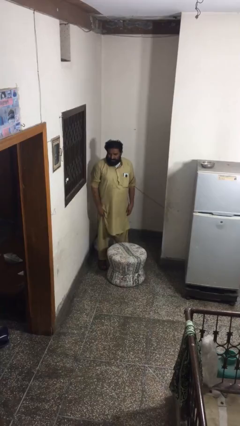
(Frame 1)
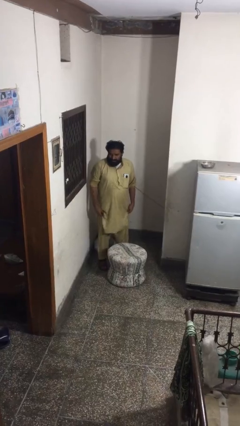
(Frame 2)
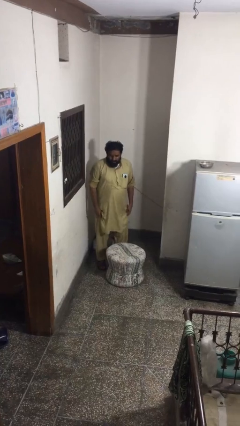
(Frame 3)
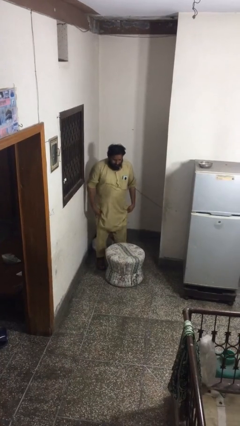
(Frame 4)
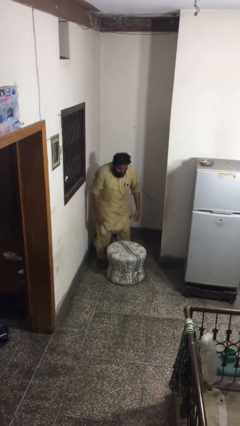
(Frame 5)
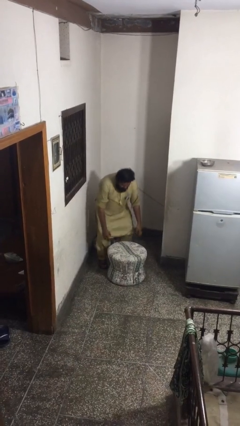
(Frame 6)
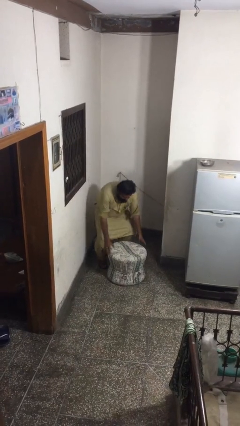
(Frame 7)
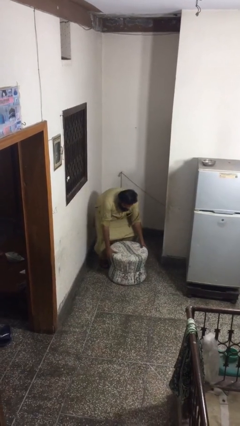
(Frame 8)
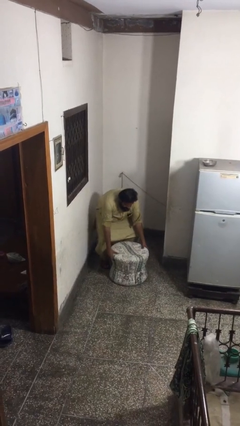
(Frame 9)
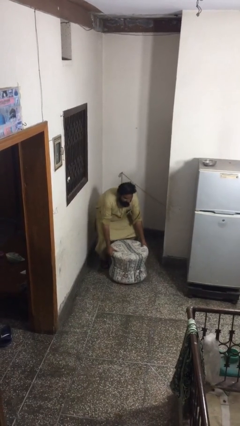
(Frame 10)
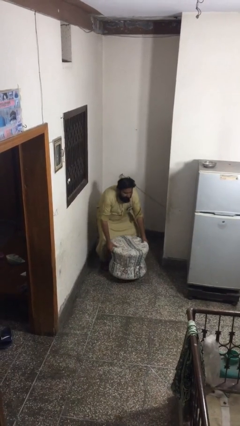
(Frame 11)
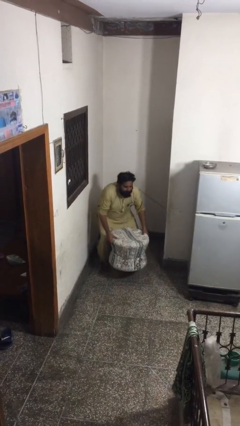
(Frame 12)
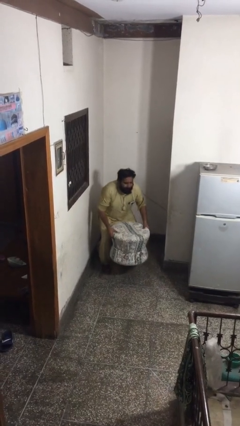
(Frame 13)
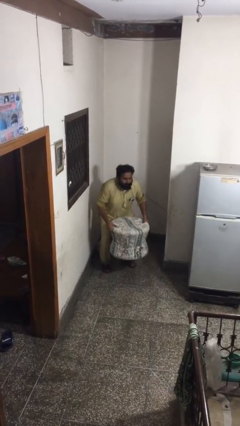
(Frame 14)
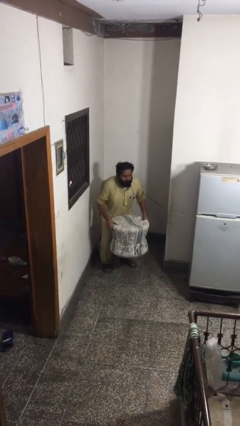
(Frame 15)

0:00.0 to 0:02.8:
person picks up object from floor

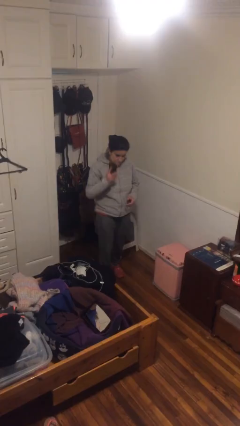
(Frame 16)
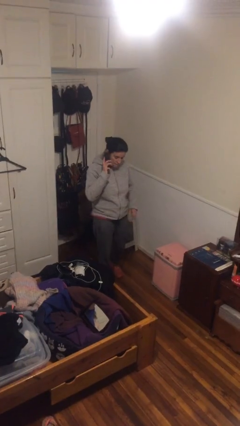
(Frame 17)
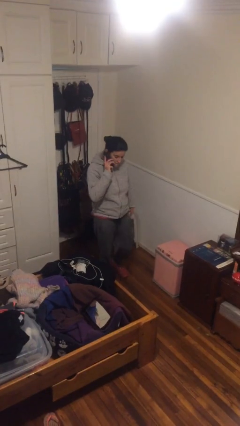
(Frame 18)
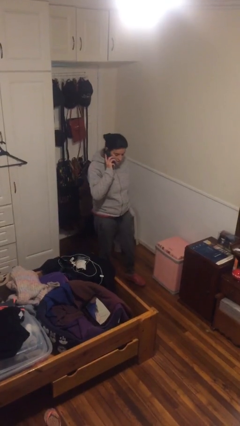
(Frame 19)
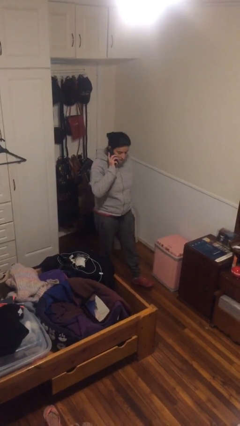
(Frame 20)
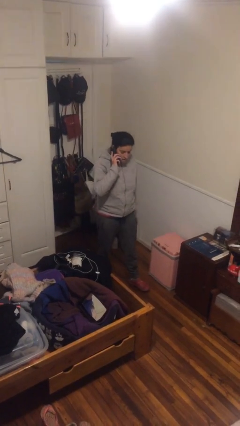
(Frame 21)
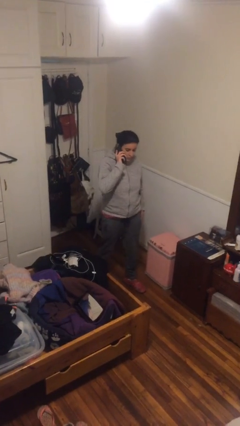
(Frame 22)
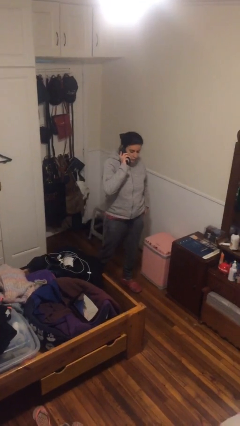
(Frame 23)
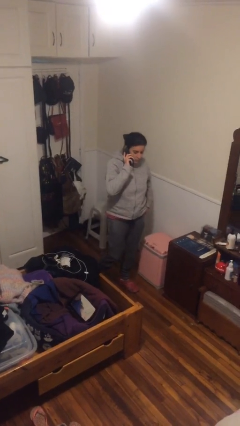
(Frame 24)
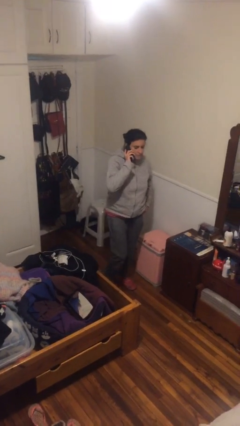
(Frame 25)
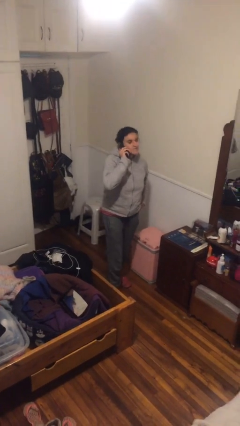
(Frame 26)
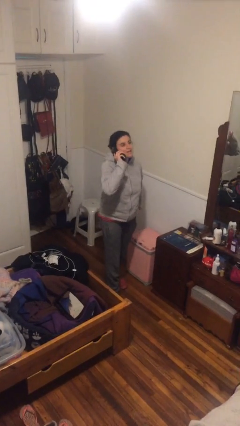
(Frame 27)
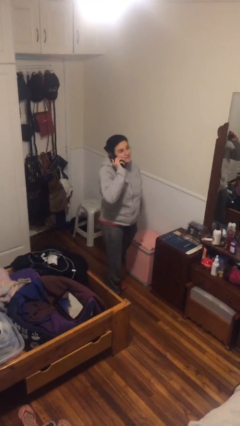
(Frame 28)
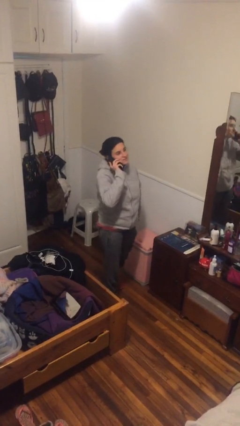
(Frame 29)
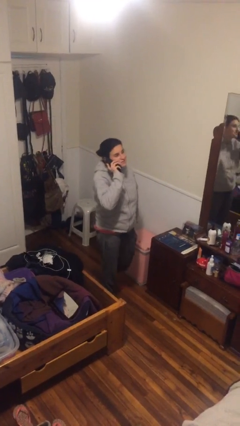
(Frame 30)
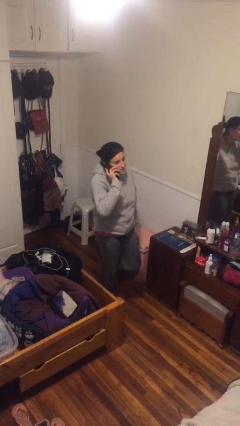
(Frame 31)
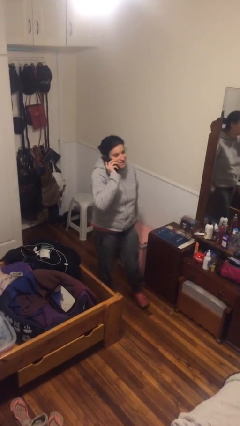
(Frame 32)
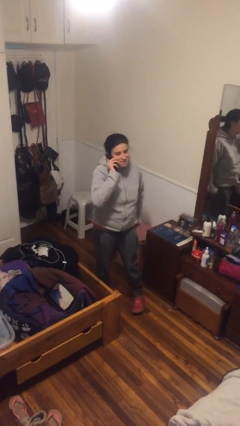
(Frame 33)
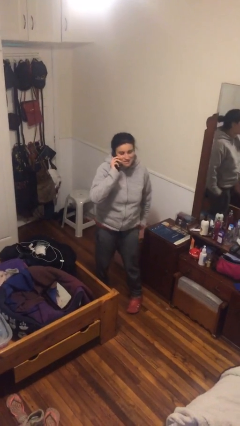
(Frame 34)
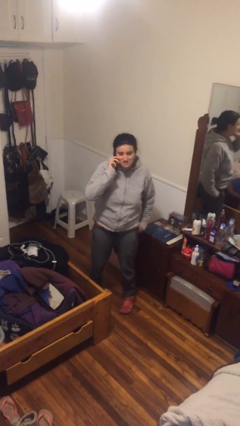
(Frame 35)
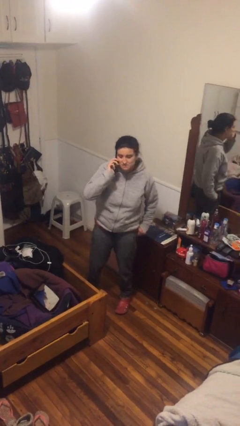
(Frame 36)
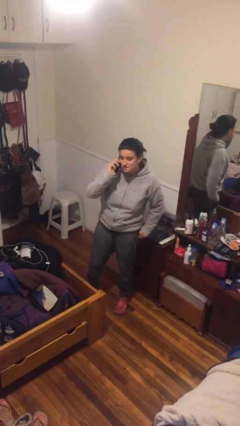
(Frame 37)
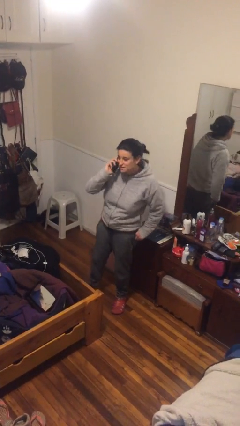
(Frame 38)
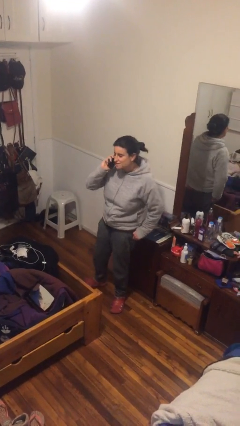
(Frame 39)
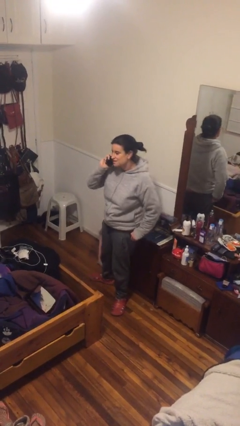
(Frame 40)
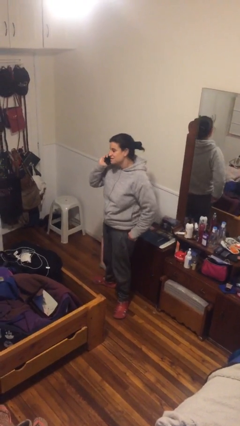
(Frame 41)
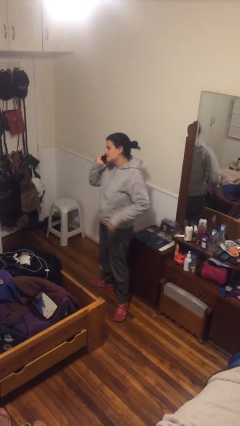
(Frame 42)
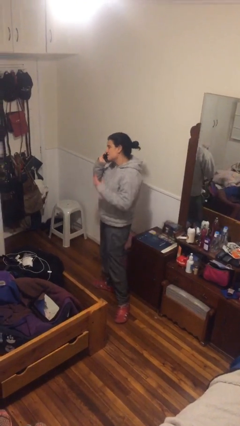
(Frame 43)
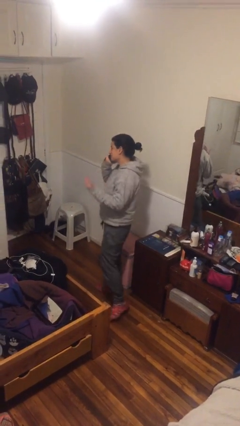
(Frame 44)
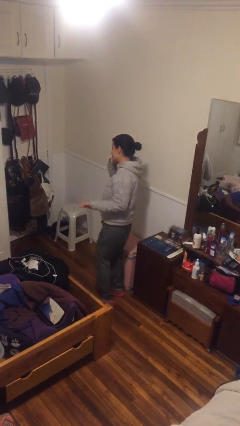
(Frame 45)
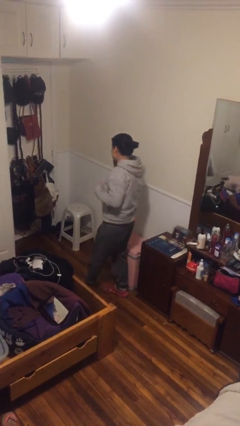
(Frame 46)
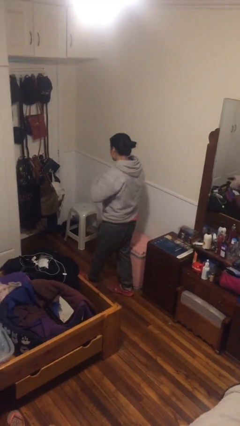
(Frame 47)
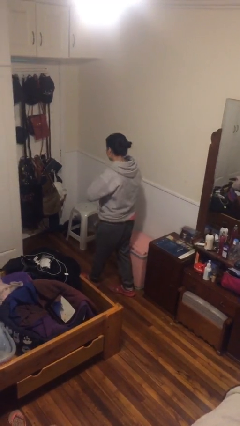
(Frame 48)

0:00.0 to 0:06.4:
person talks on phone

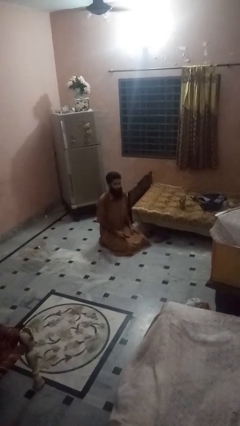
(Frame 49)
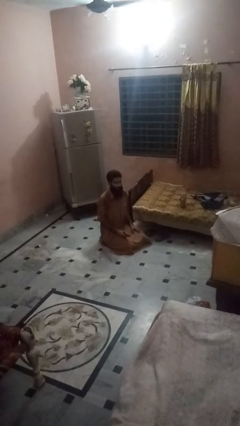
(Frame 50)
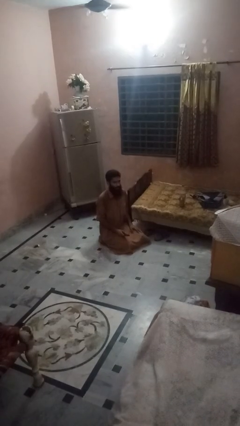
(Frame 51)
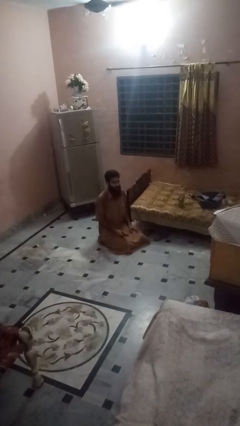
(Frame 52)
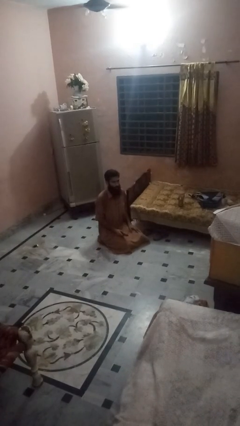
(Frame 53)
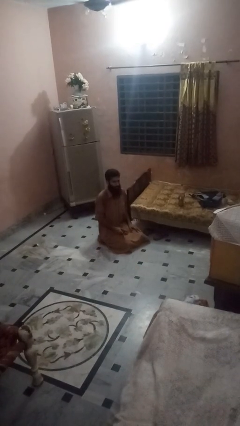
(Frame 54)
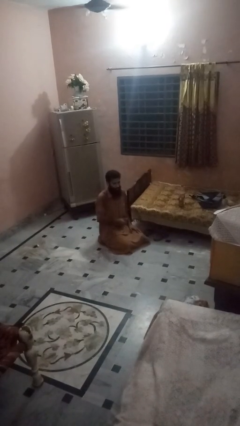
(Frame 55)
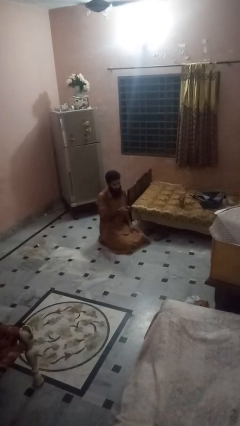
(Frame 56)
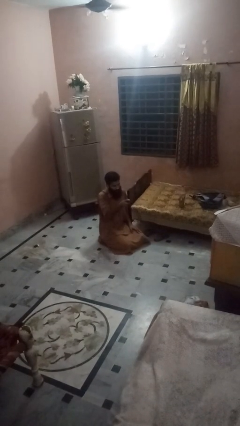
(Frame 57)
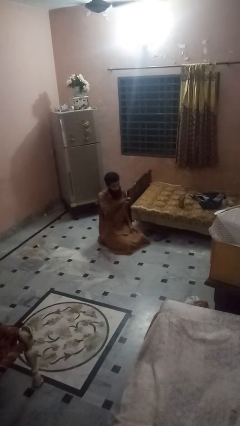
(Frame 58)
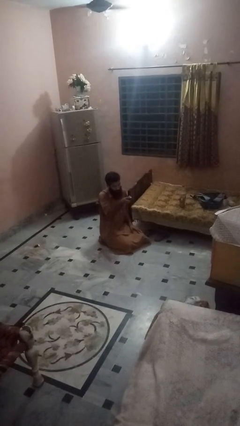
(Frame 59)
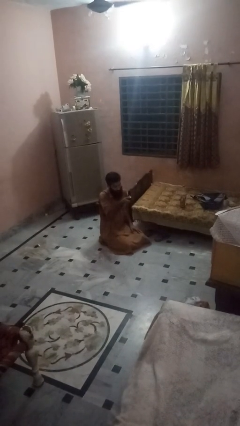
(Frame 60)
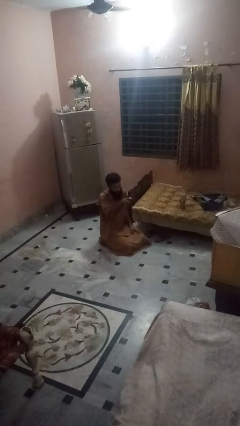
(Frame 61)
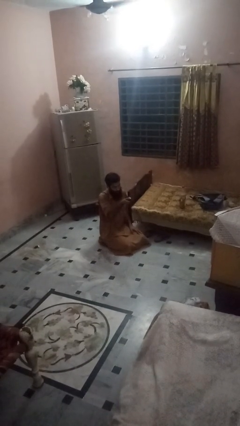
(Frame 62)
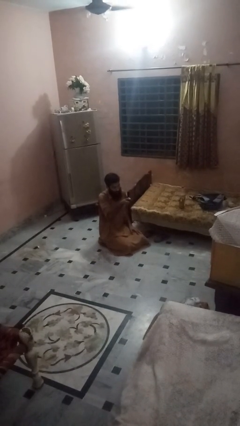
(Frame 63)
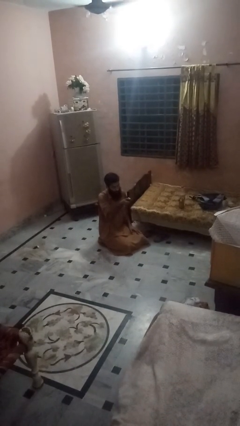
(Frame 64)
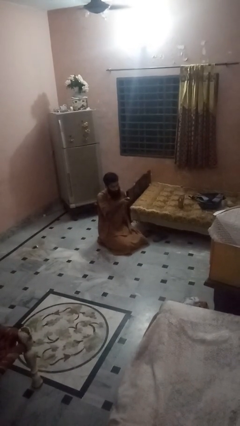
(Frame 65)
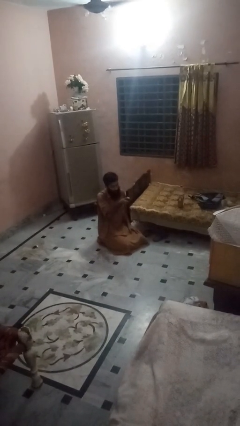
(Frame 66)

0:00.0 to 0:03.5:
person uses television remote

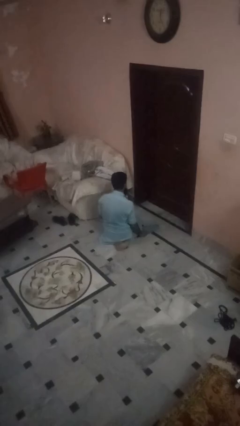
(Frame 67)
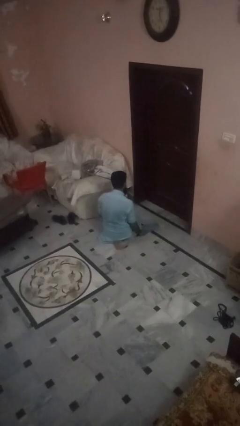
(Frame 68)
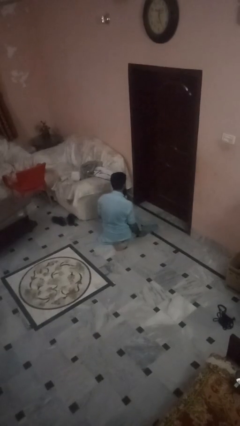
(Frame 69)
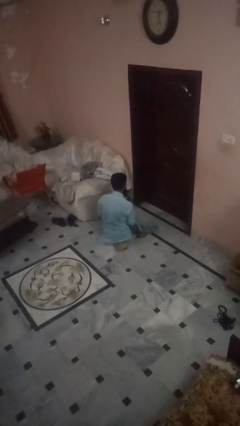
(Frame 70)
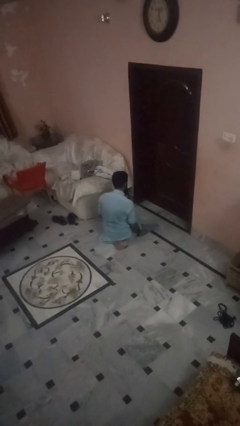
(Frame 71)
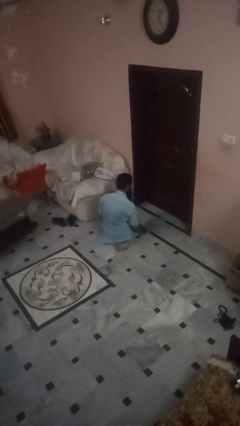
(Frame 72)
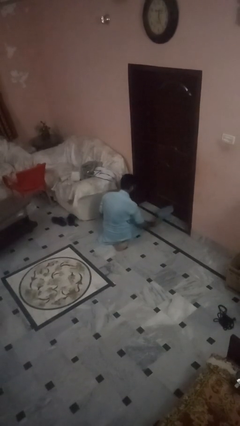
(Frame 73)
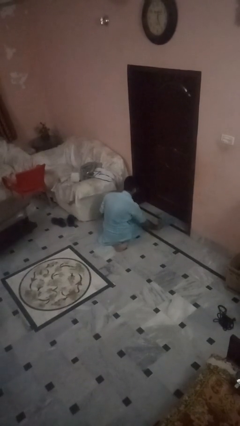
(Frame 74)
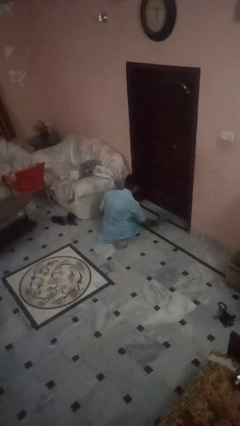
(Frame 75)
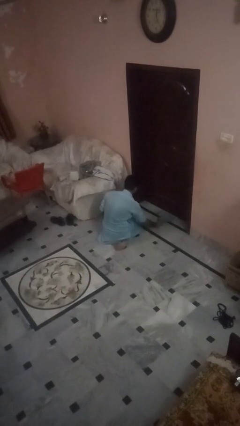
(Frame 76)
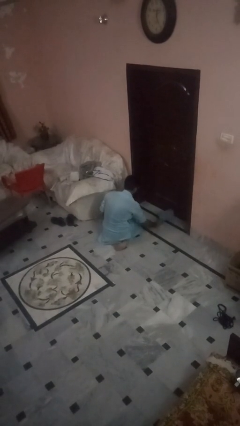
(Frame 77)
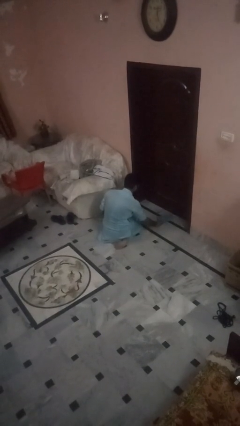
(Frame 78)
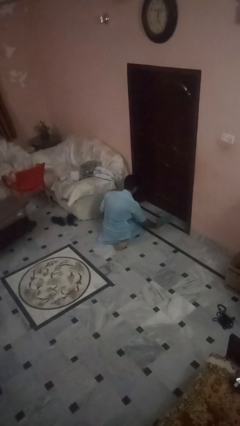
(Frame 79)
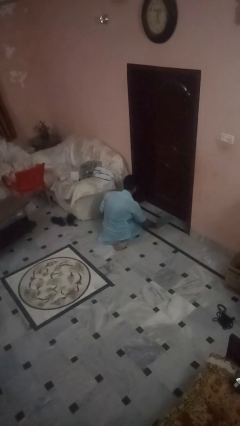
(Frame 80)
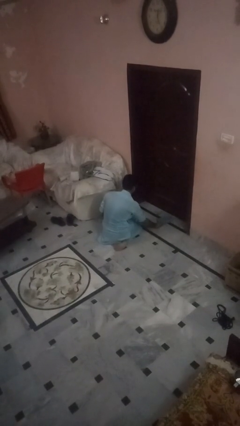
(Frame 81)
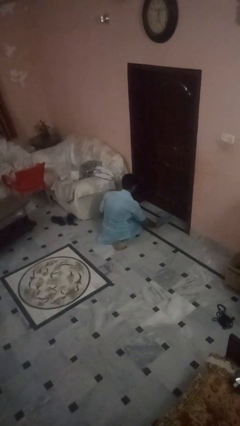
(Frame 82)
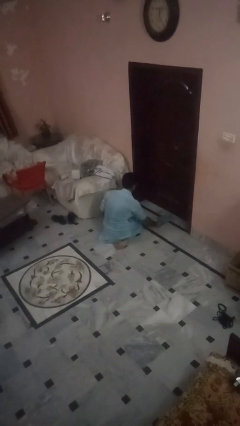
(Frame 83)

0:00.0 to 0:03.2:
person swats bug

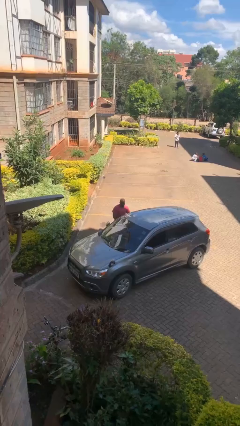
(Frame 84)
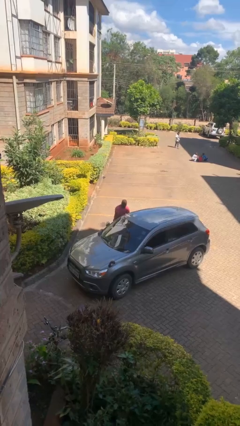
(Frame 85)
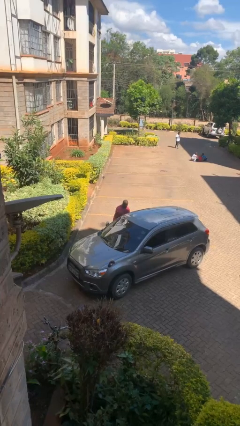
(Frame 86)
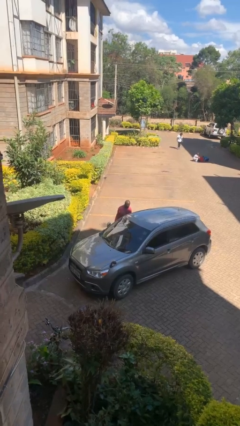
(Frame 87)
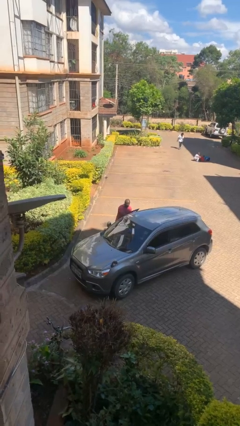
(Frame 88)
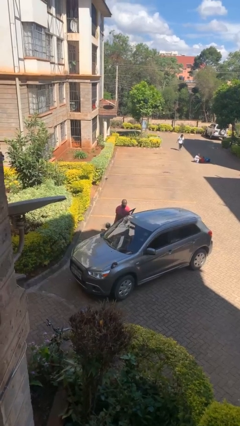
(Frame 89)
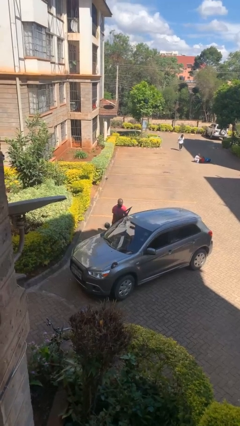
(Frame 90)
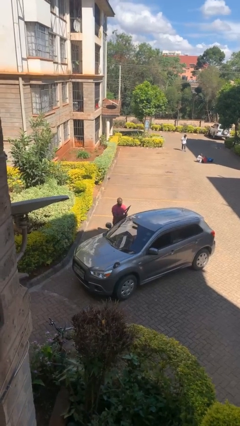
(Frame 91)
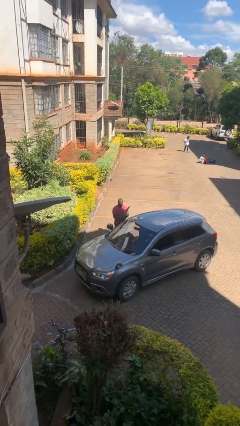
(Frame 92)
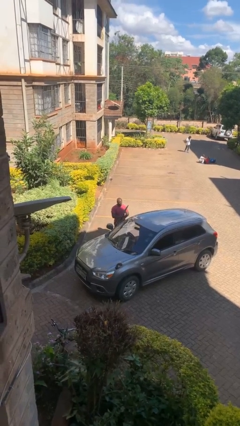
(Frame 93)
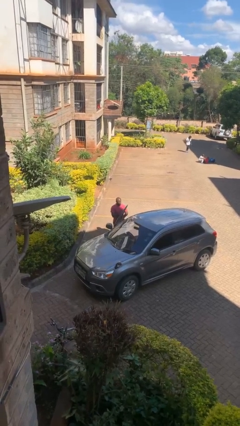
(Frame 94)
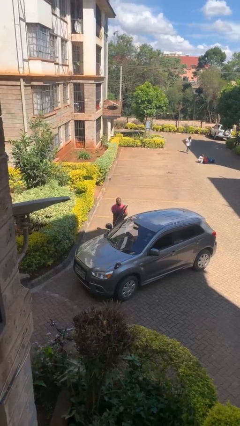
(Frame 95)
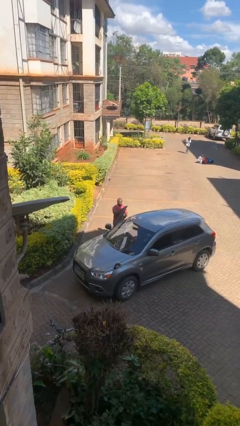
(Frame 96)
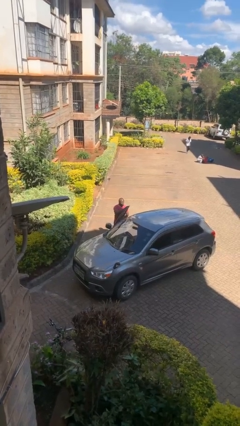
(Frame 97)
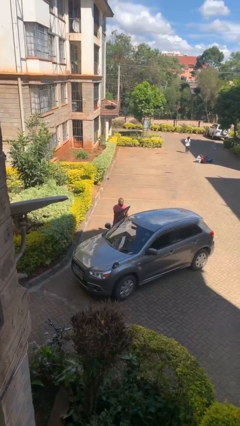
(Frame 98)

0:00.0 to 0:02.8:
person opens car door
